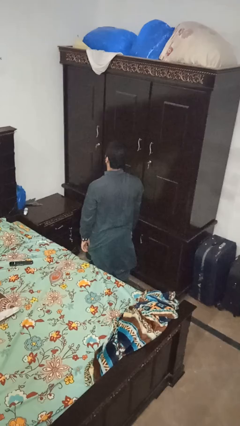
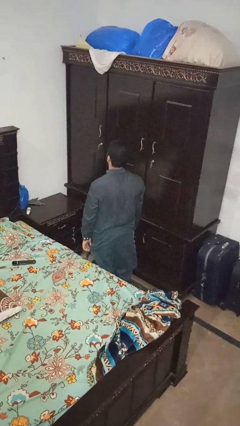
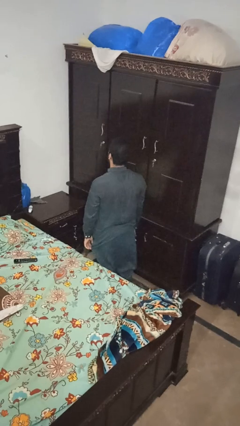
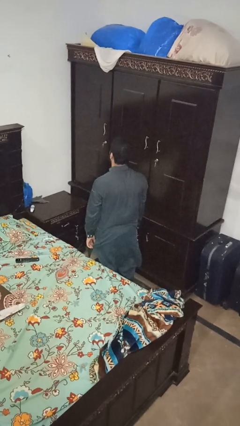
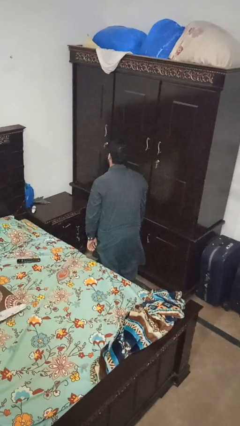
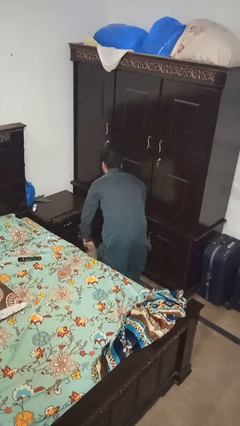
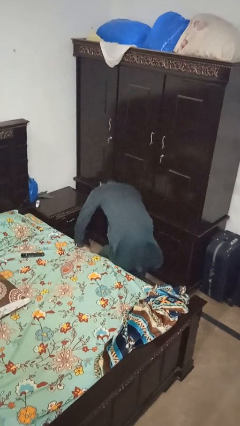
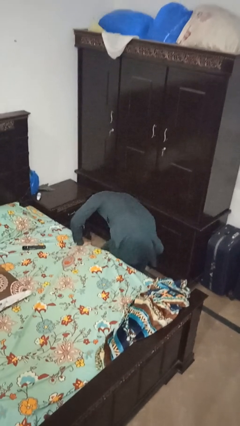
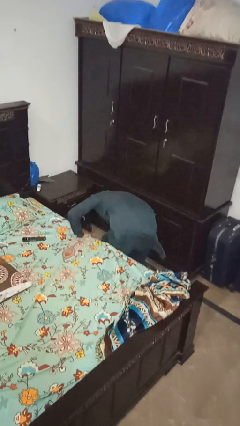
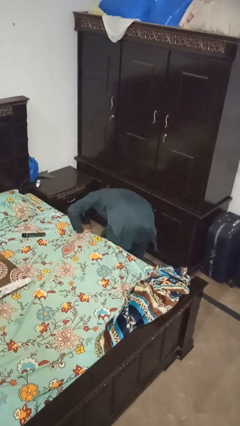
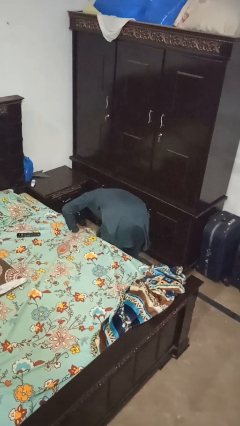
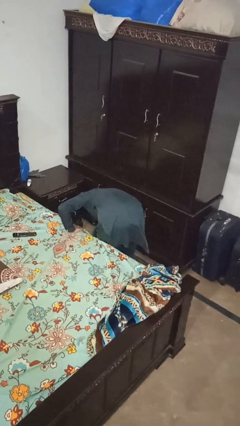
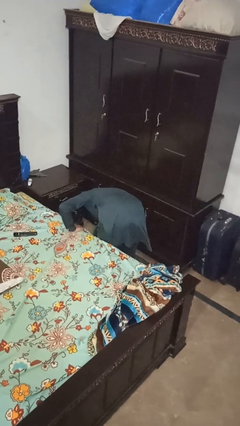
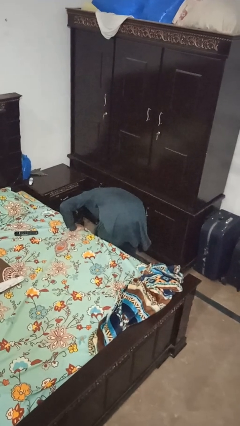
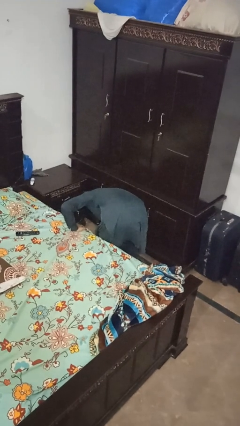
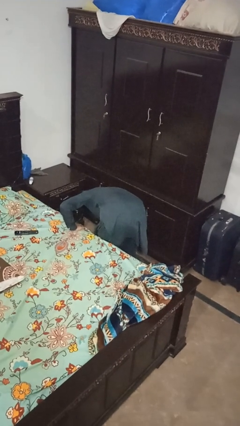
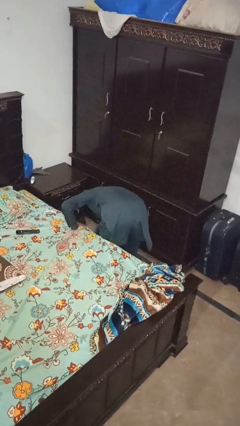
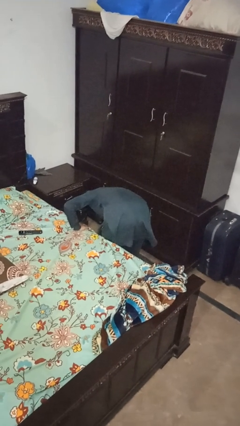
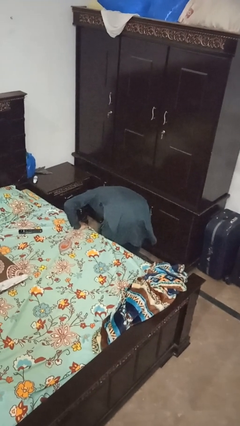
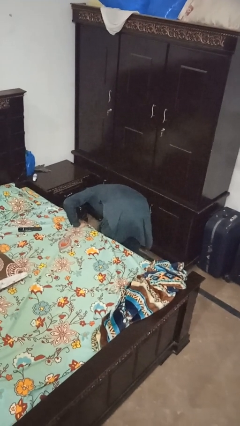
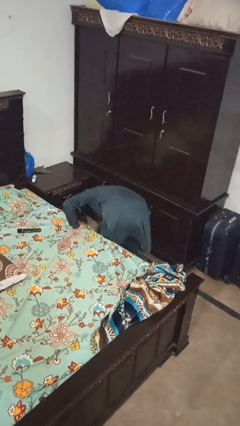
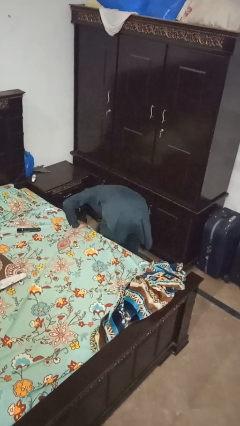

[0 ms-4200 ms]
person searches under bed

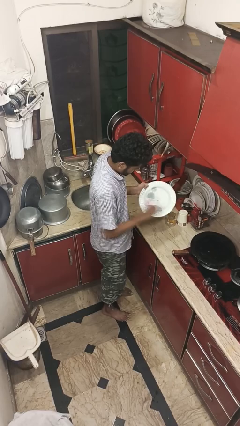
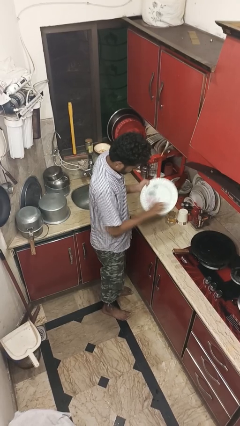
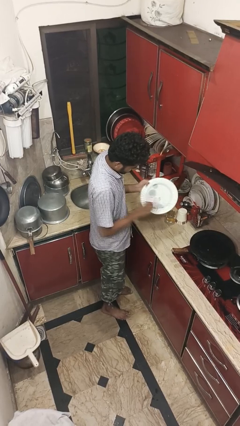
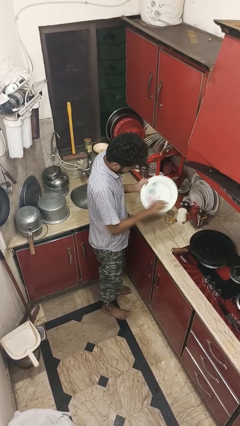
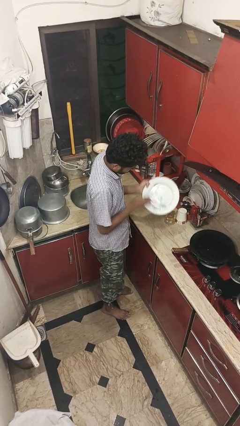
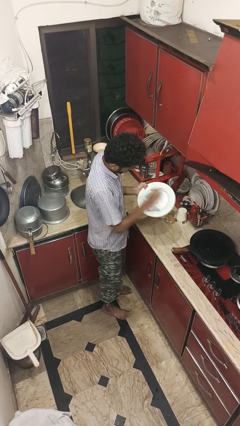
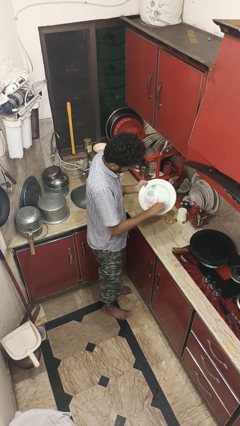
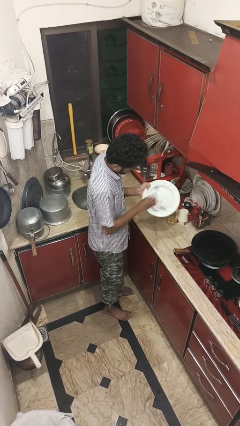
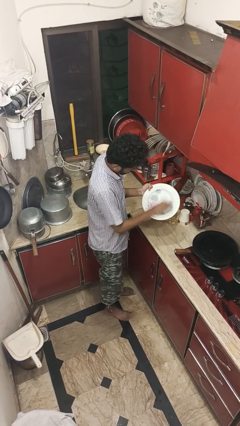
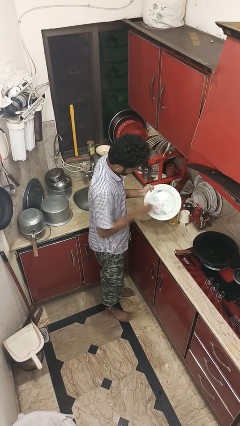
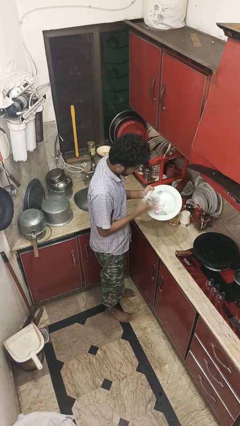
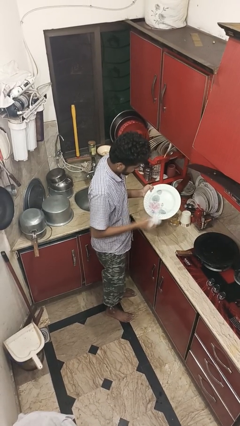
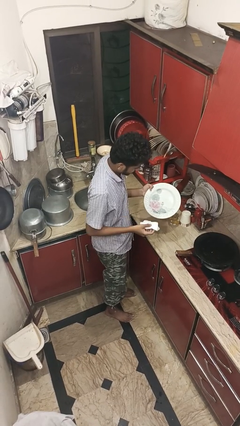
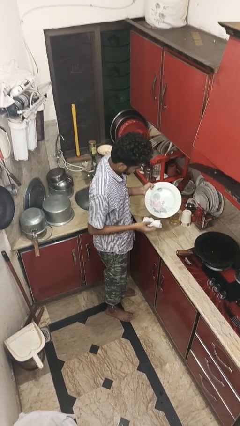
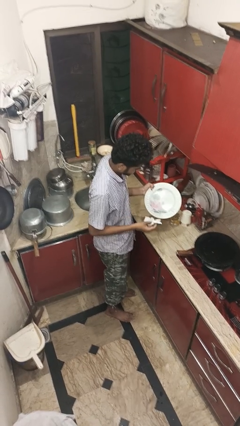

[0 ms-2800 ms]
person dries dish

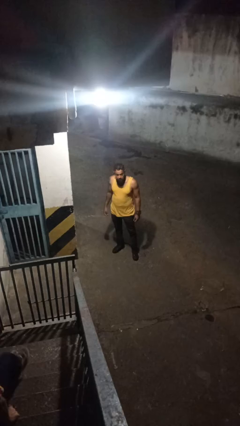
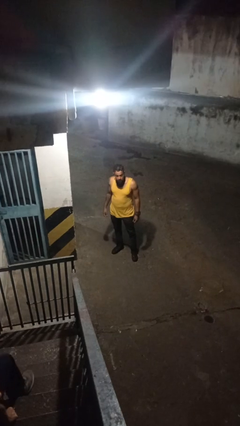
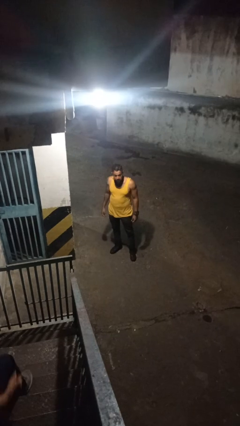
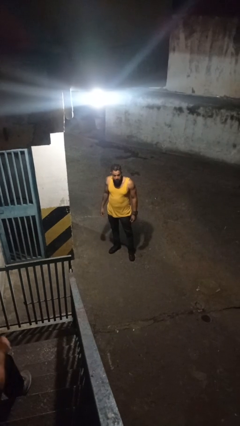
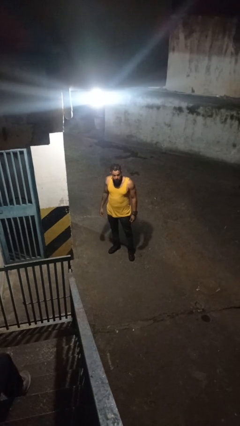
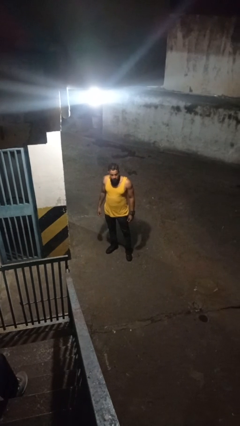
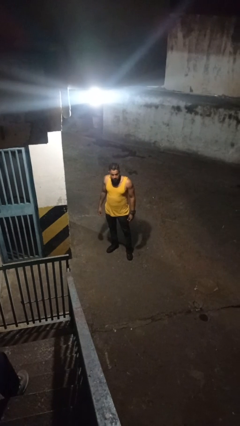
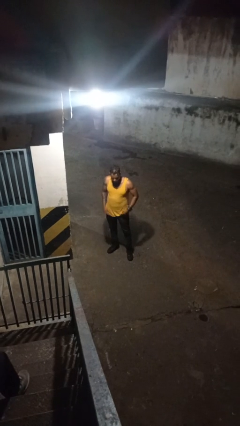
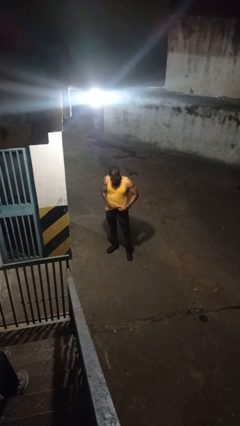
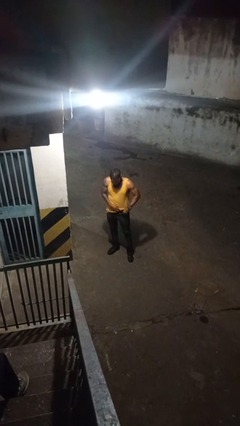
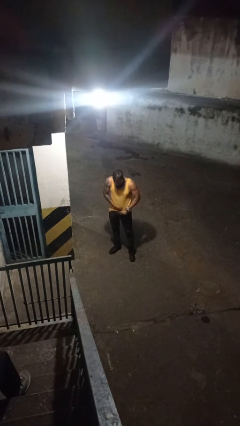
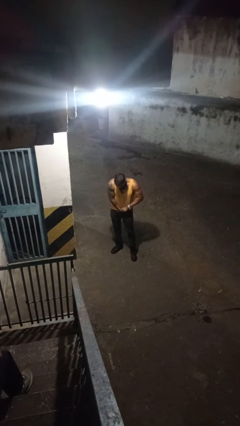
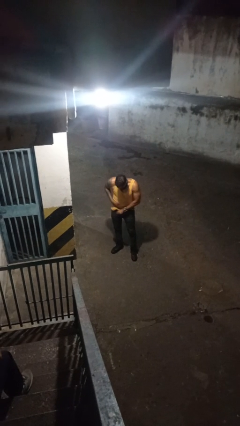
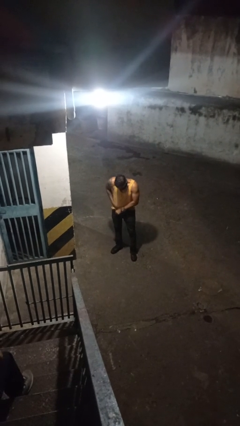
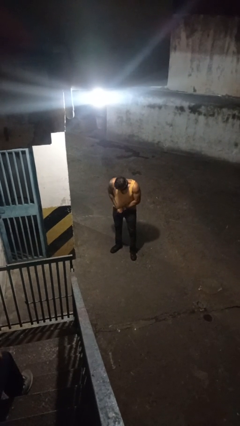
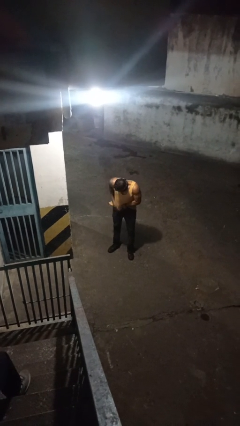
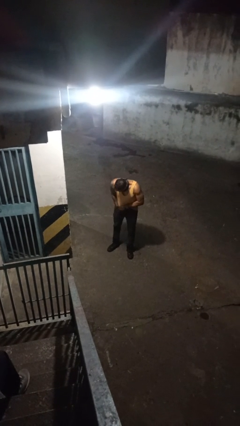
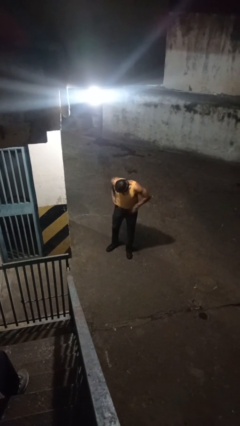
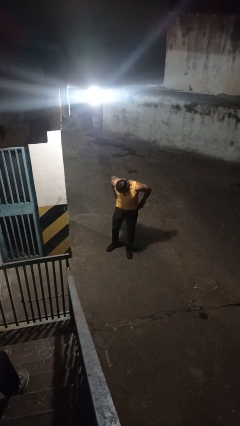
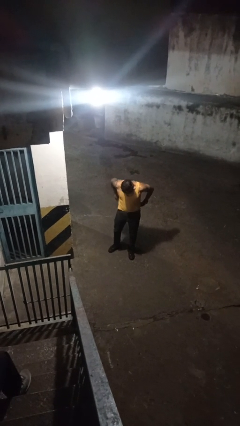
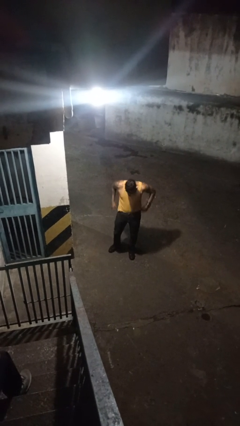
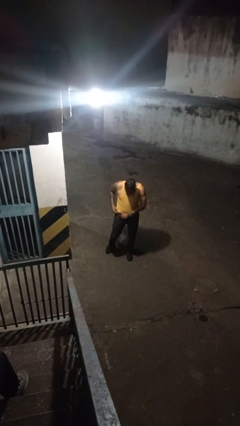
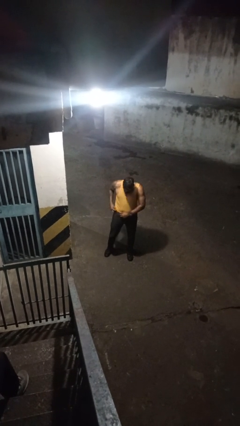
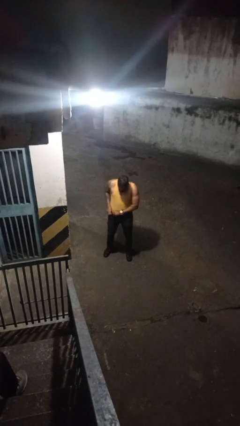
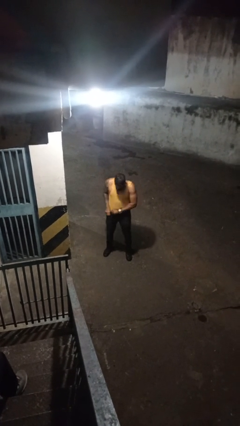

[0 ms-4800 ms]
person tucks in shirt

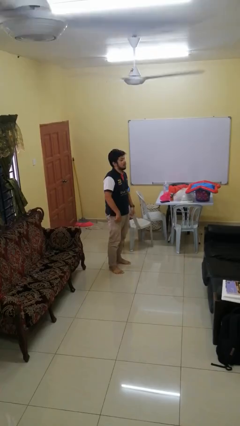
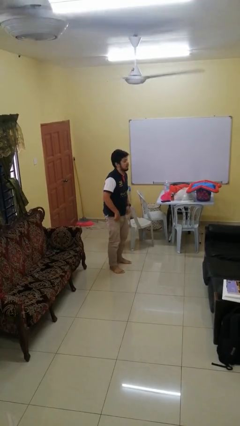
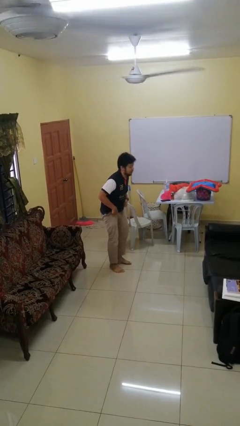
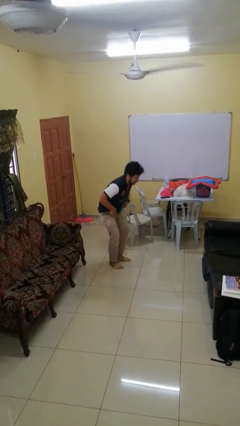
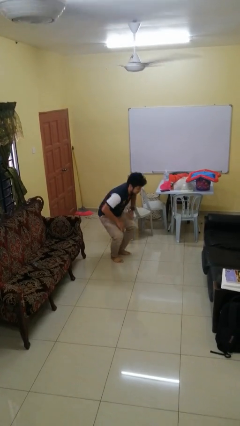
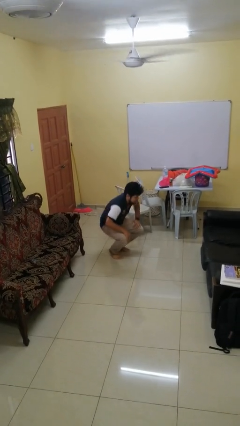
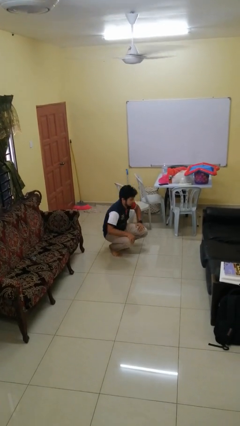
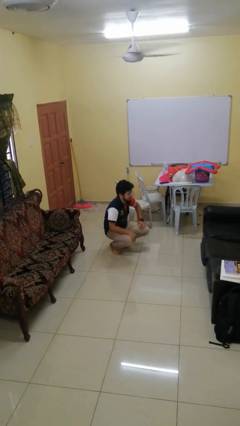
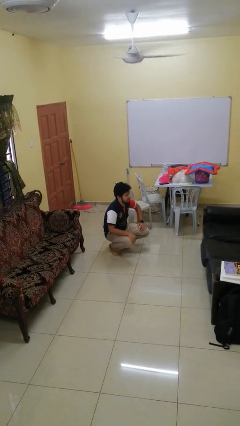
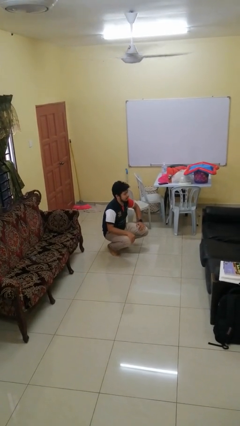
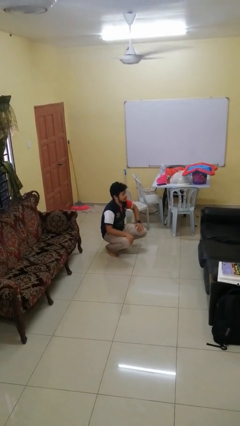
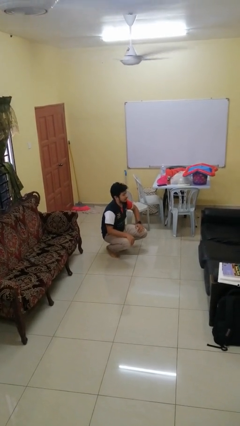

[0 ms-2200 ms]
person squats

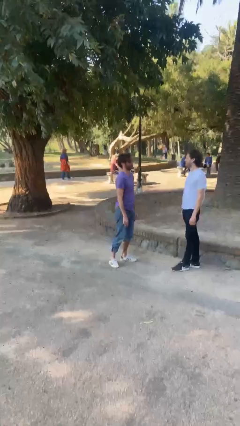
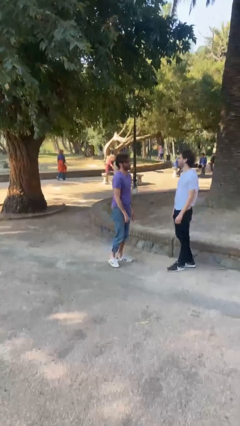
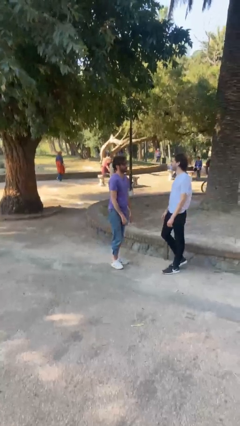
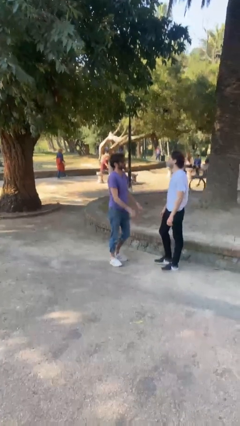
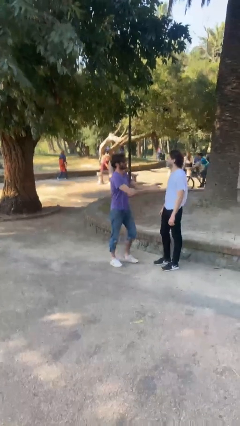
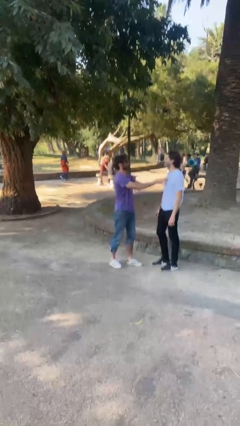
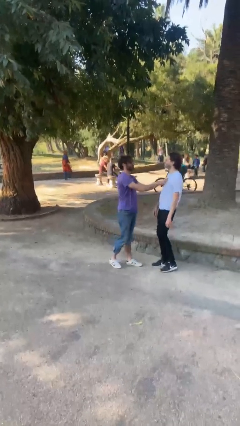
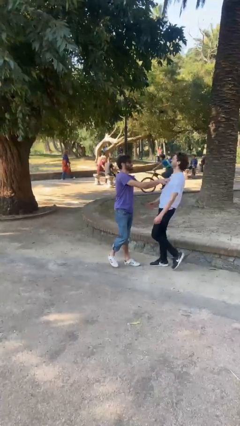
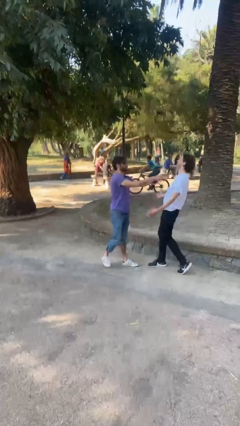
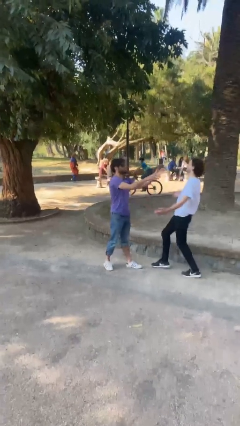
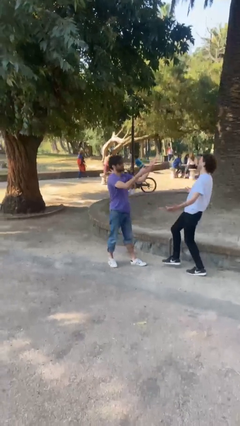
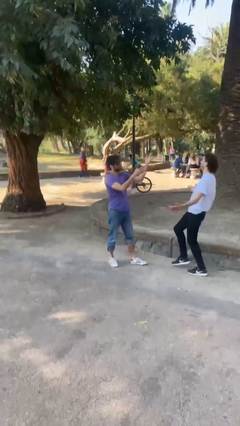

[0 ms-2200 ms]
person shoves person

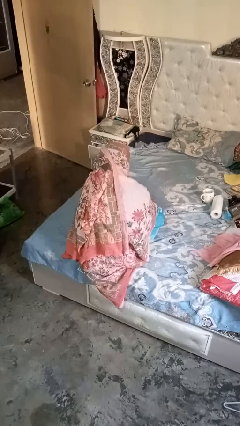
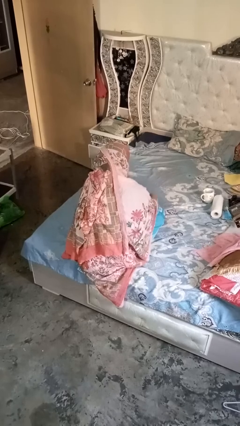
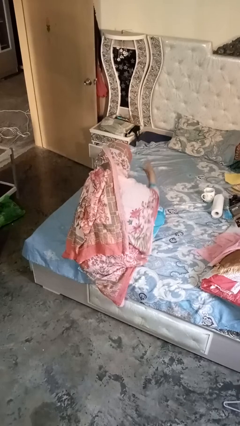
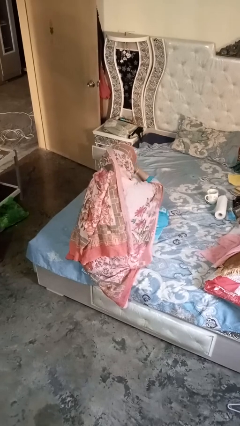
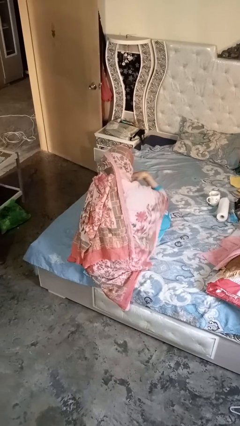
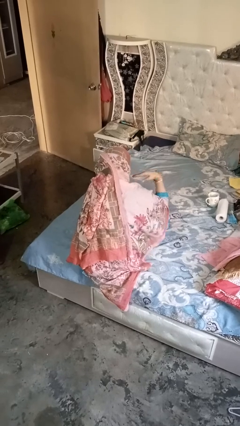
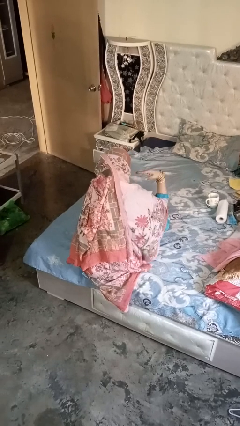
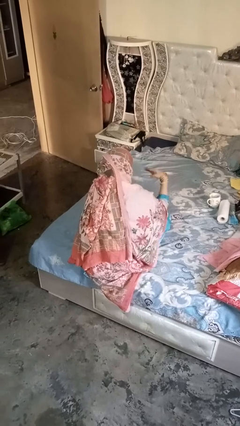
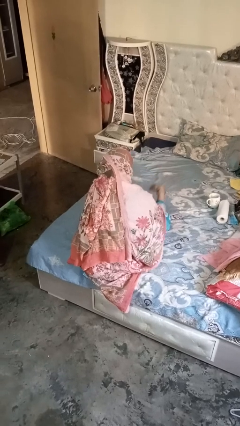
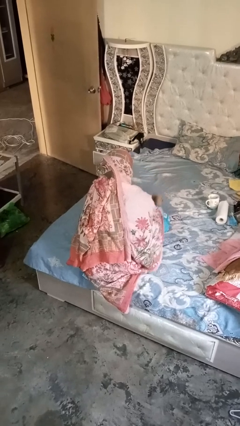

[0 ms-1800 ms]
person gestures cut
